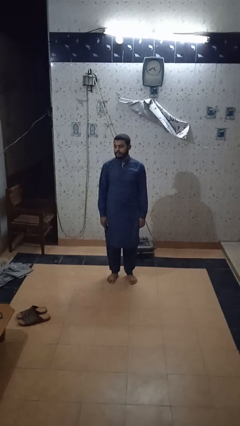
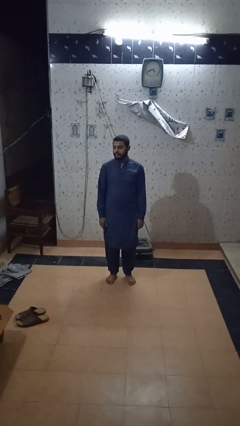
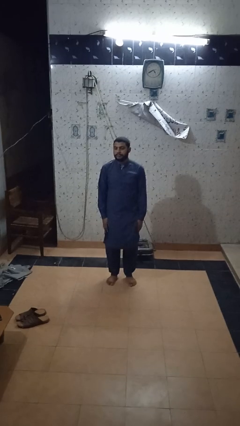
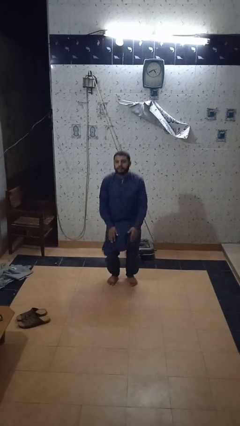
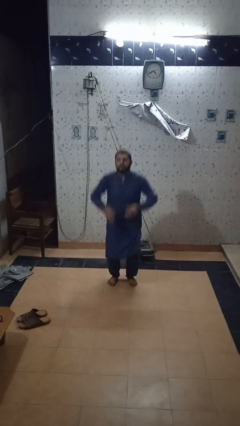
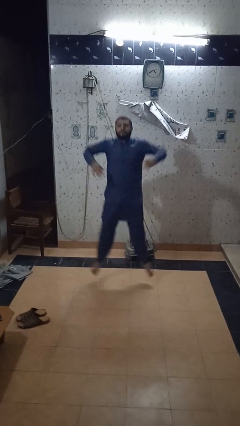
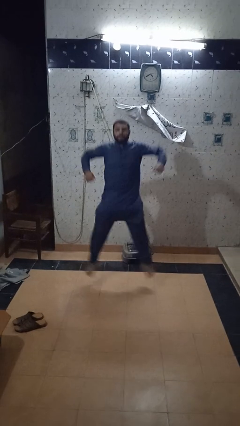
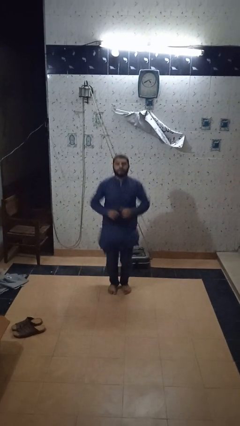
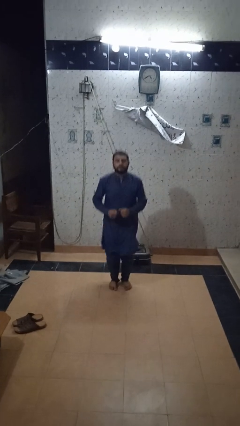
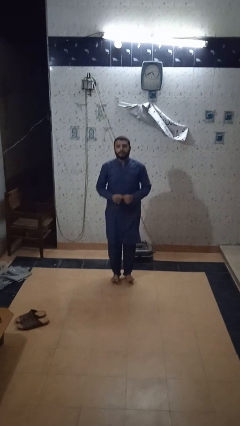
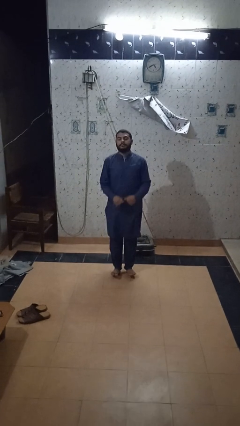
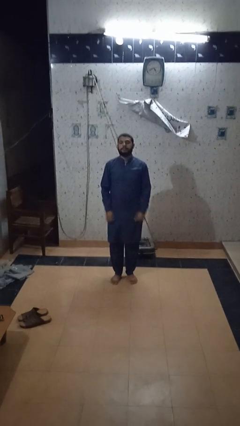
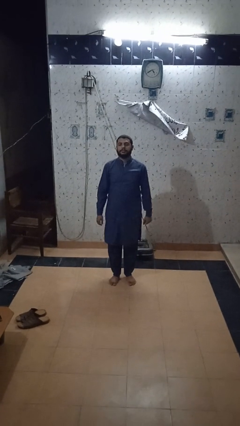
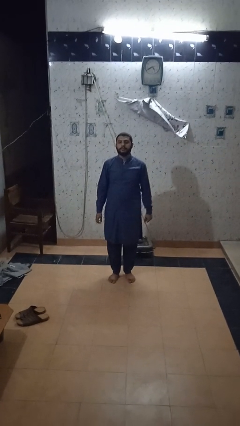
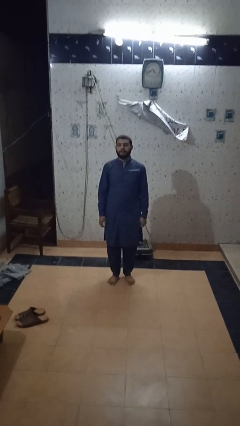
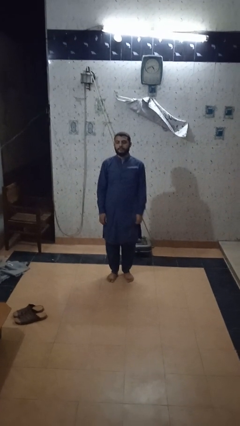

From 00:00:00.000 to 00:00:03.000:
person exercises with jumping jacks

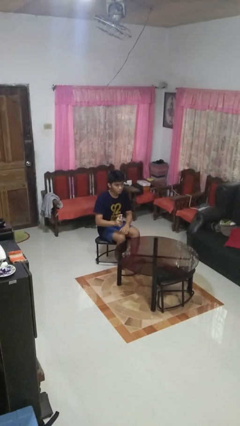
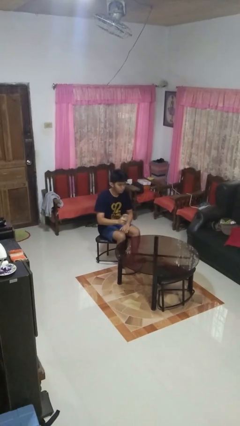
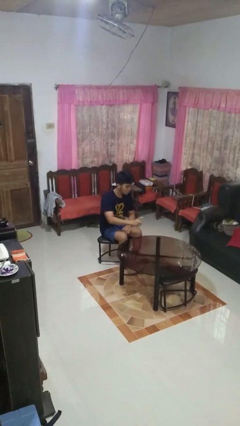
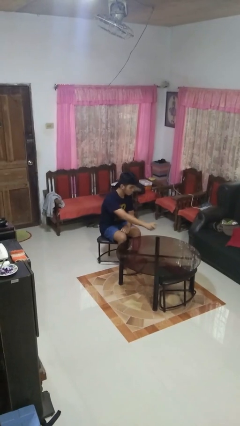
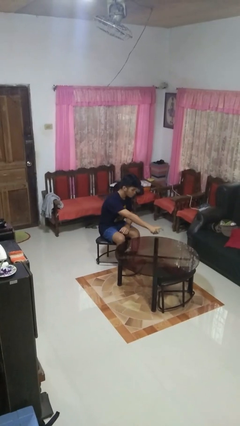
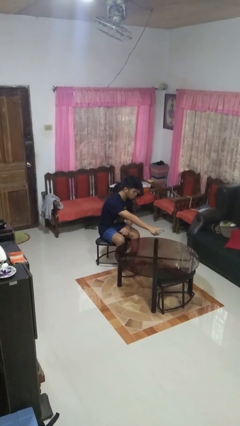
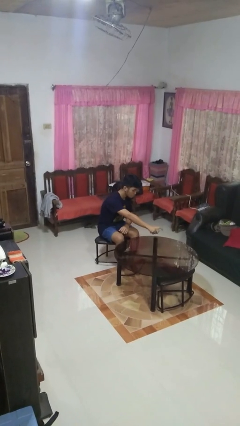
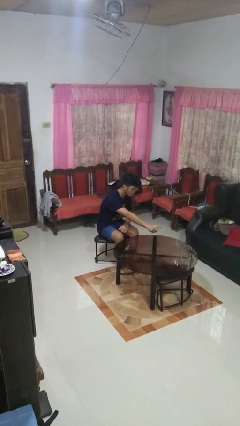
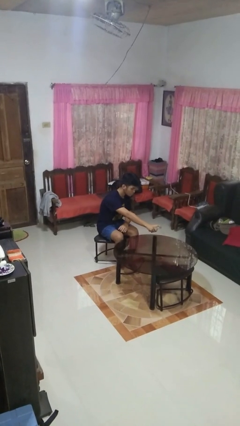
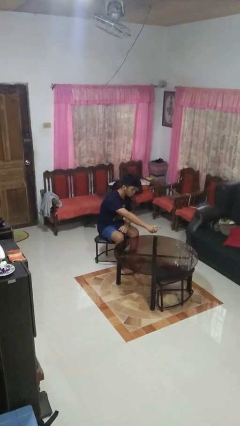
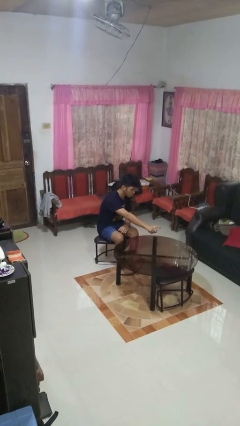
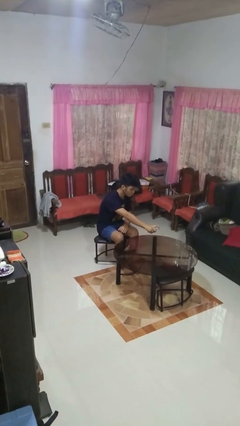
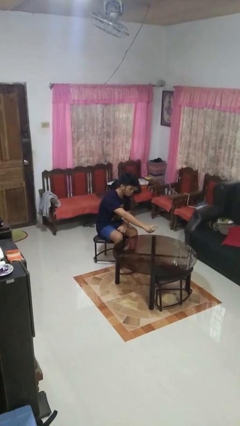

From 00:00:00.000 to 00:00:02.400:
person sprays from bottle

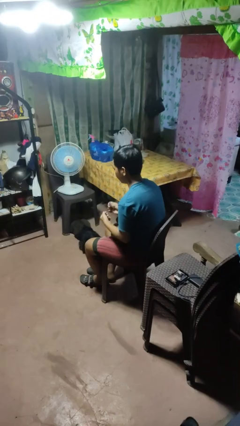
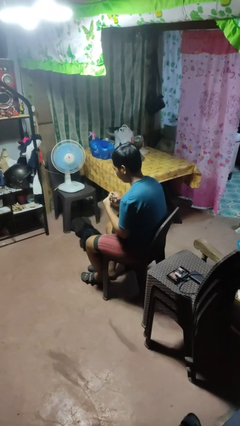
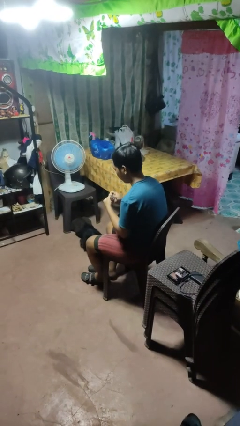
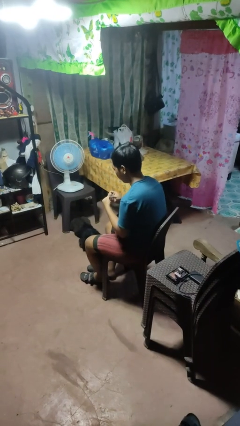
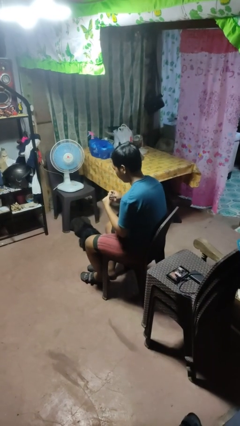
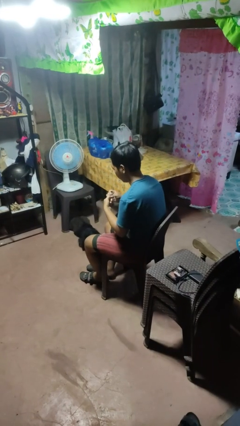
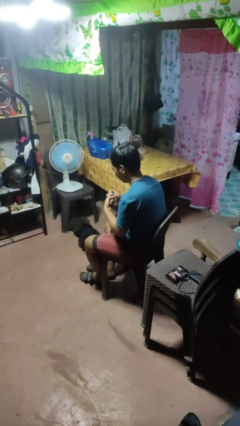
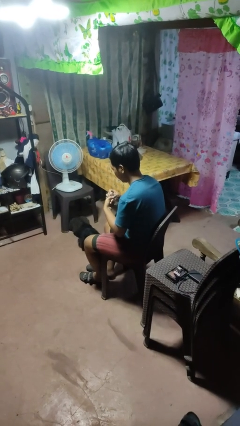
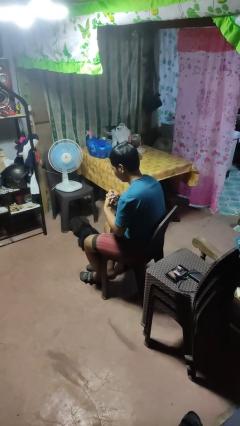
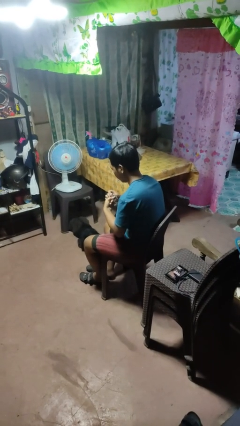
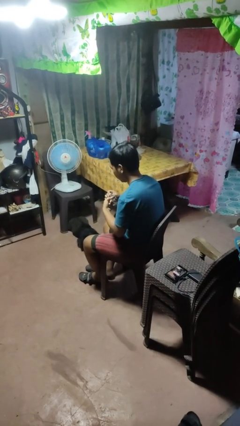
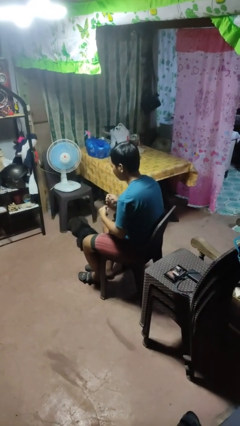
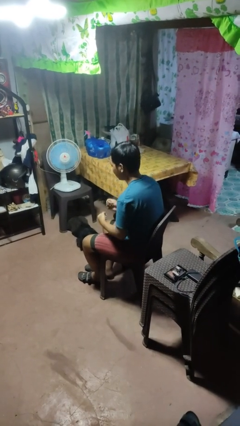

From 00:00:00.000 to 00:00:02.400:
person files fingernails

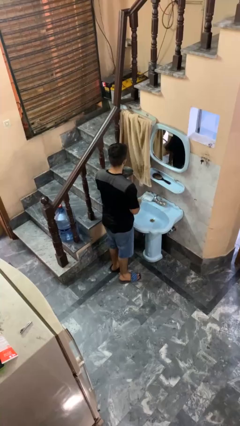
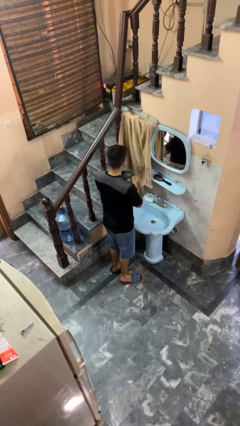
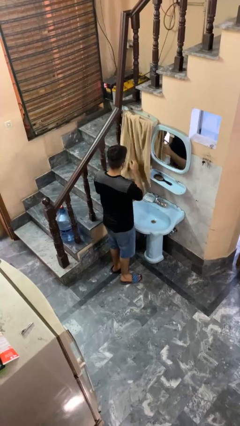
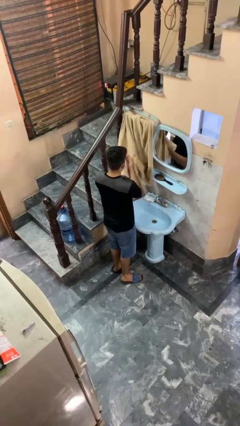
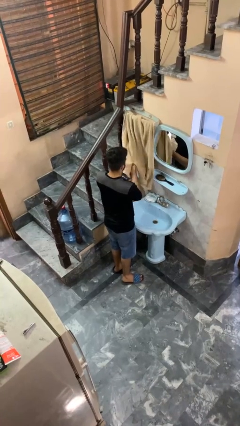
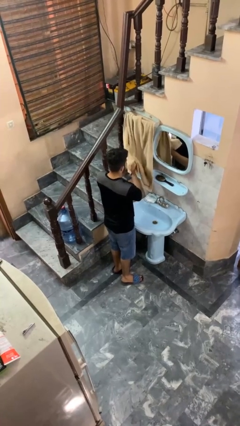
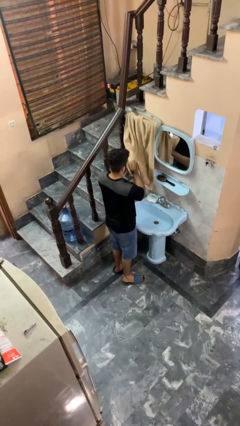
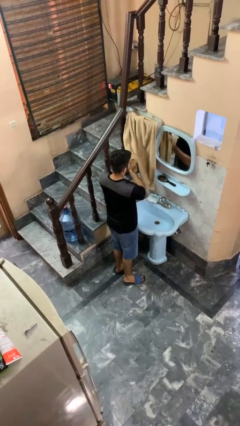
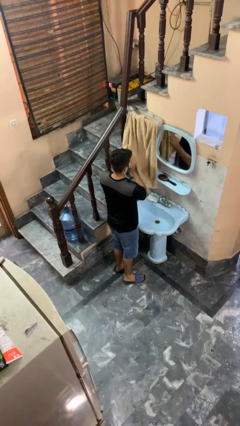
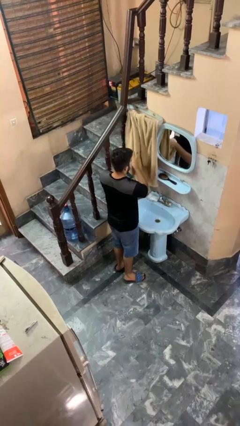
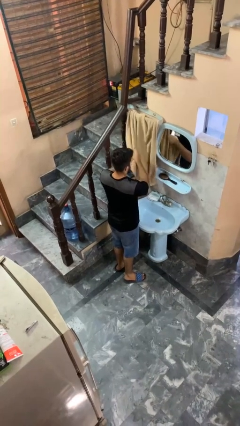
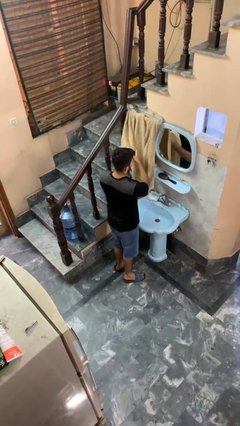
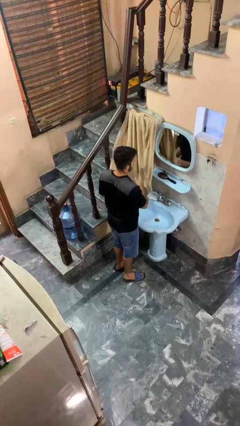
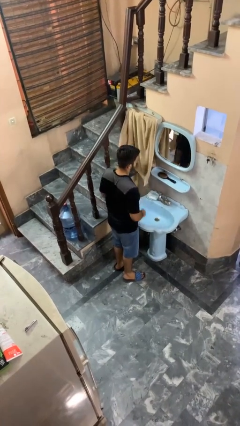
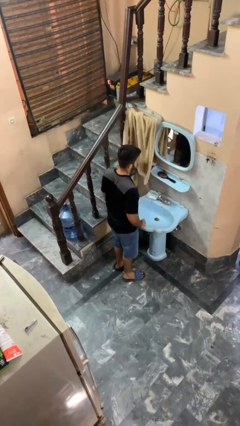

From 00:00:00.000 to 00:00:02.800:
person dries hands with towel

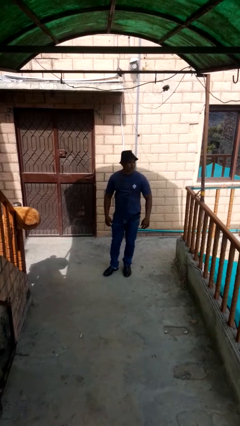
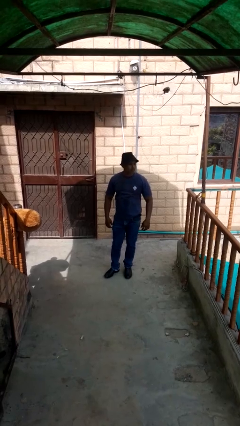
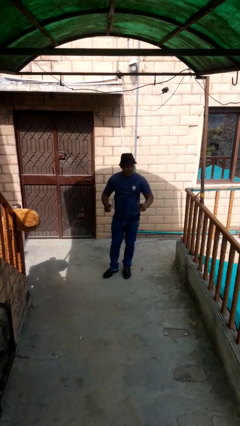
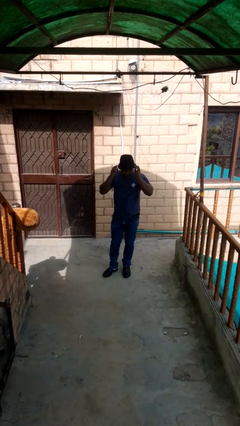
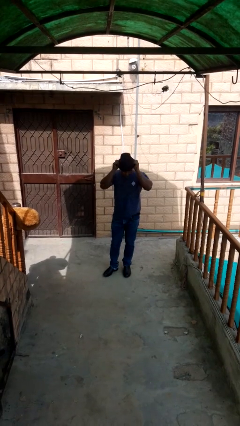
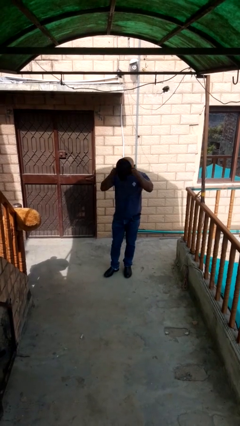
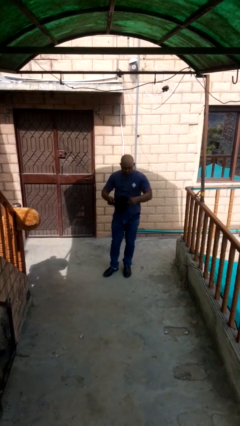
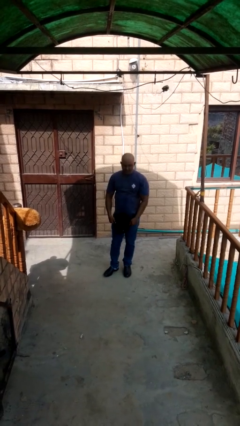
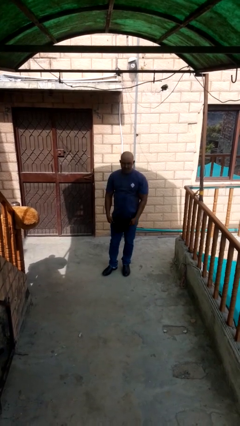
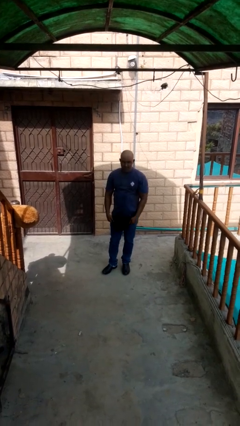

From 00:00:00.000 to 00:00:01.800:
person takes off hat

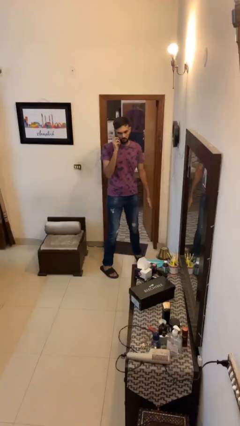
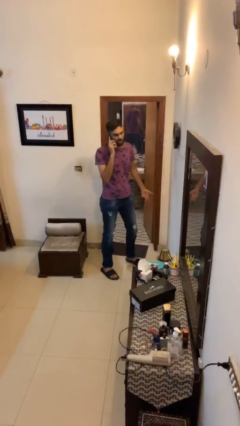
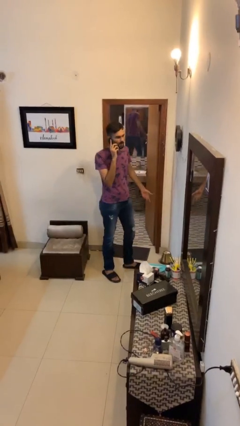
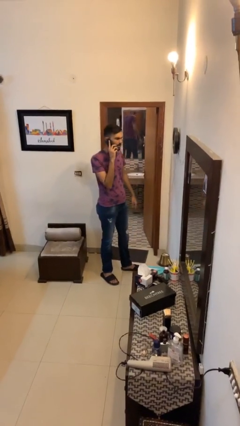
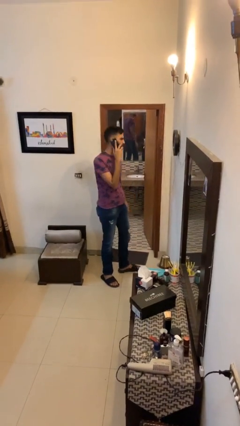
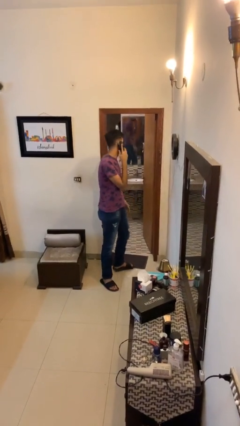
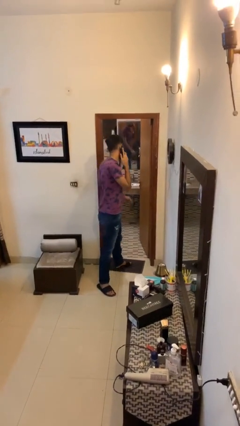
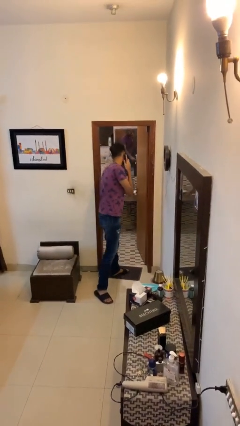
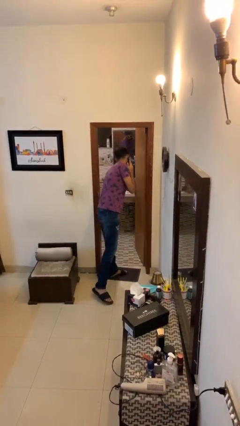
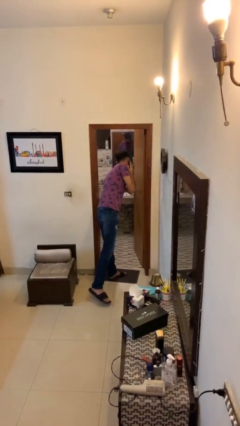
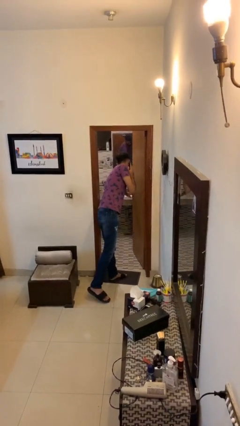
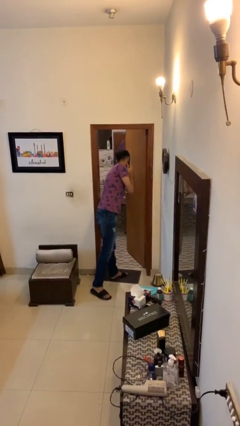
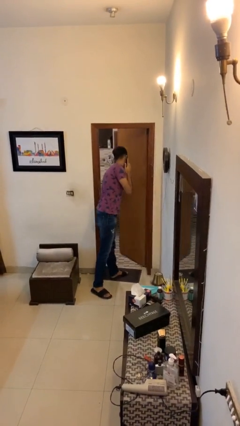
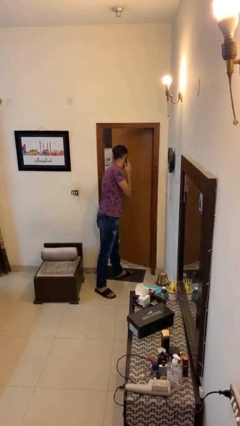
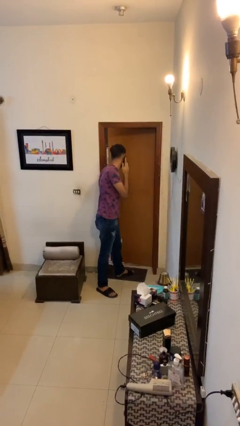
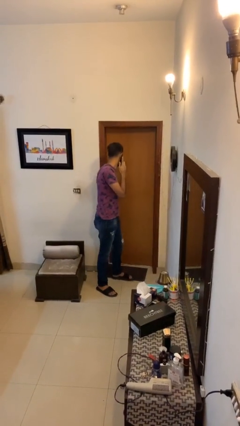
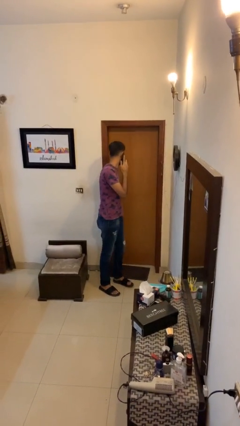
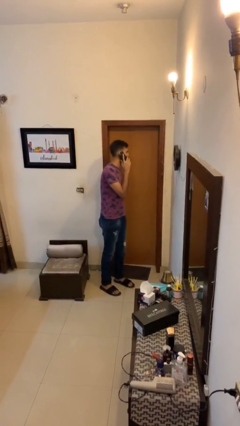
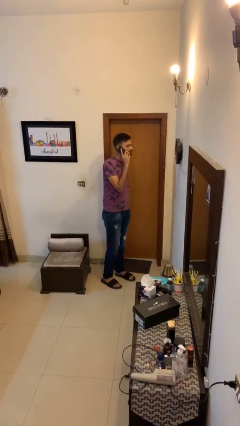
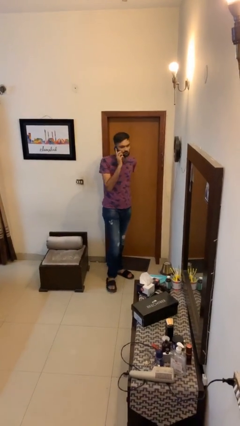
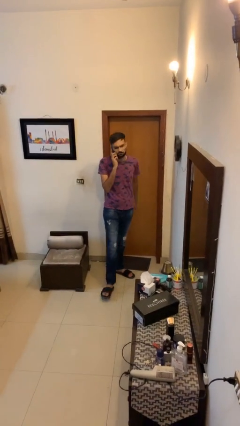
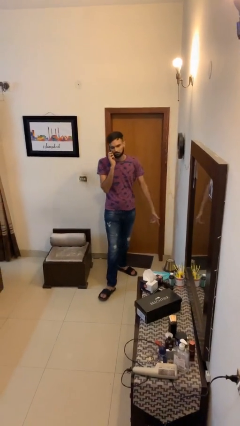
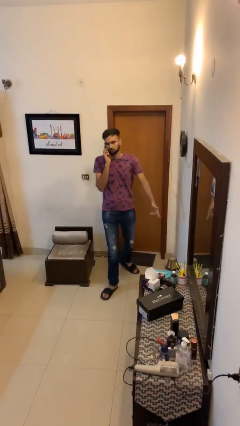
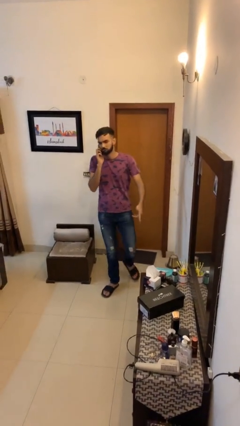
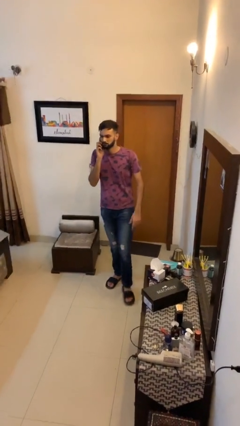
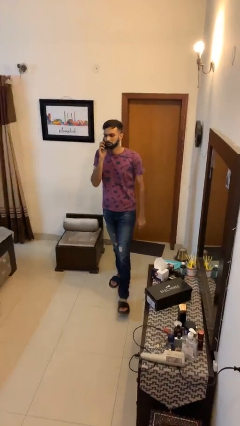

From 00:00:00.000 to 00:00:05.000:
person closes facility door

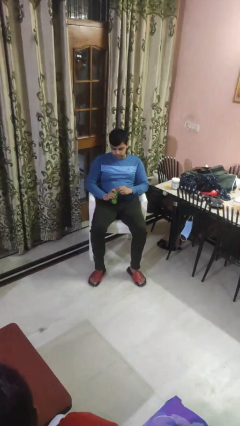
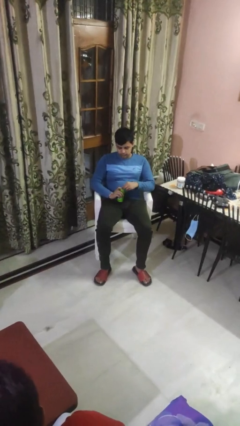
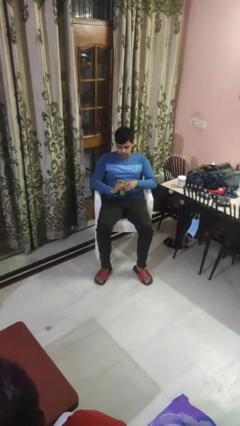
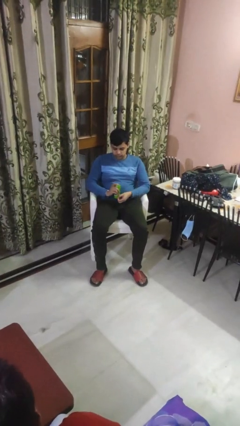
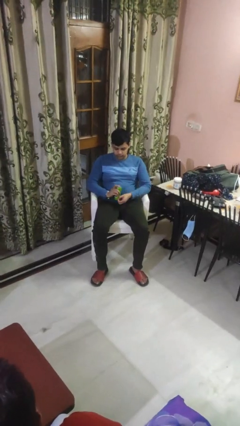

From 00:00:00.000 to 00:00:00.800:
person opens beverage can
